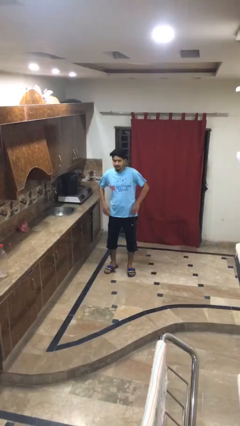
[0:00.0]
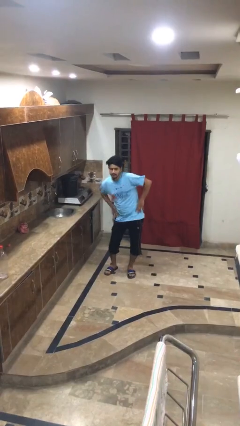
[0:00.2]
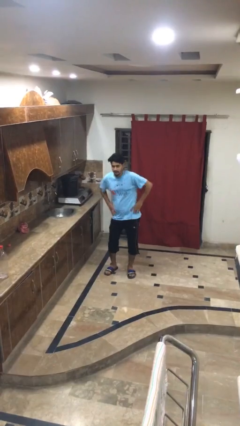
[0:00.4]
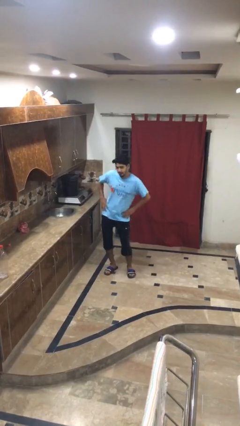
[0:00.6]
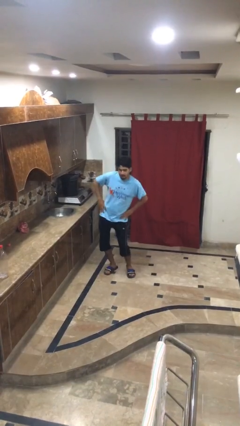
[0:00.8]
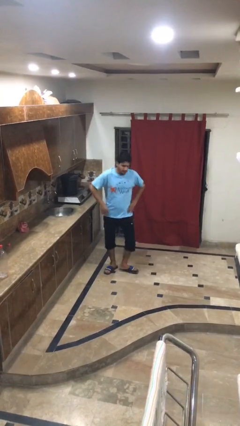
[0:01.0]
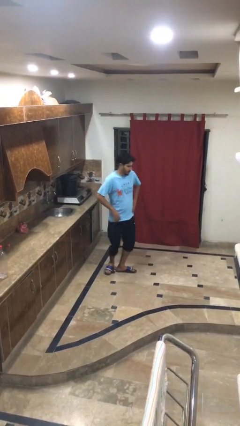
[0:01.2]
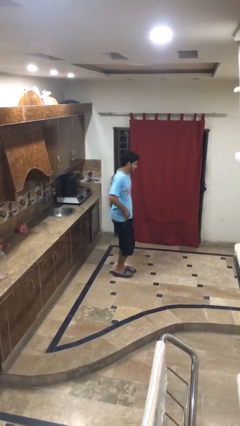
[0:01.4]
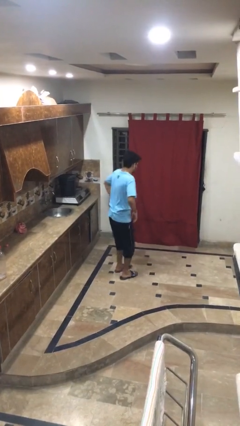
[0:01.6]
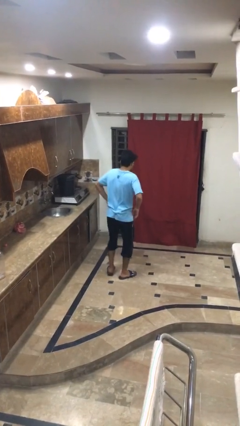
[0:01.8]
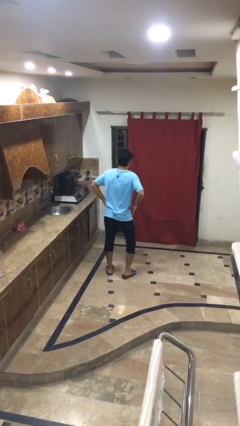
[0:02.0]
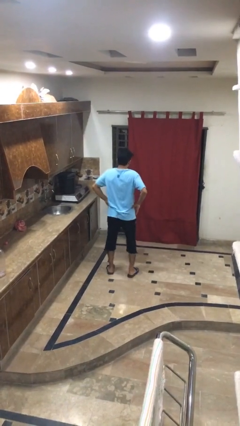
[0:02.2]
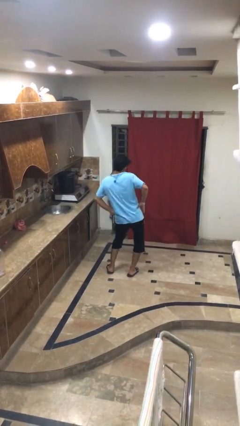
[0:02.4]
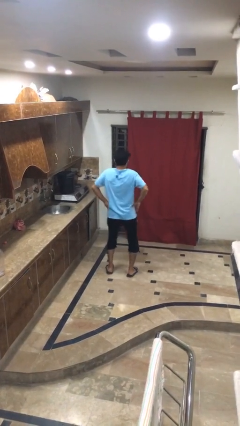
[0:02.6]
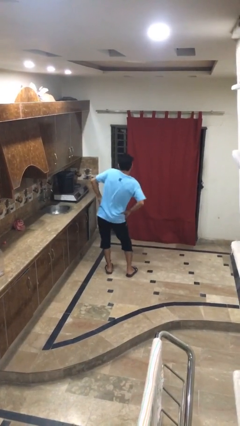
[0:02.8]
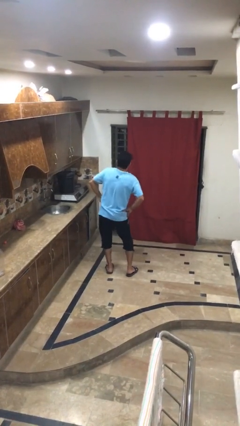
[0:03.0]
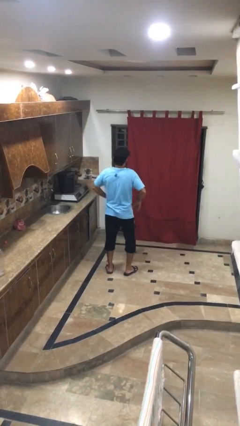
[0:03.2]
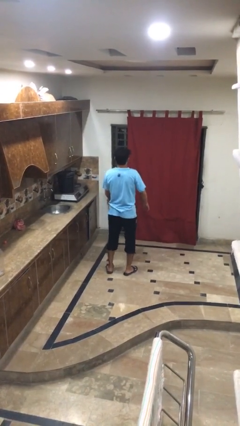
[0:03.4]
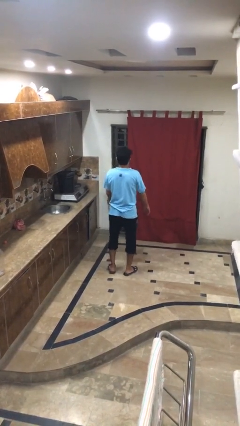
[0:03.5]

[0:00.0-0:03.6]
person wiggles hips

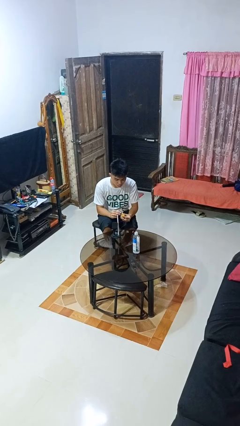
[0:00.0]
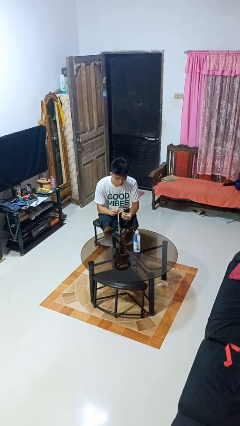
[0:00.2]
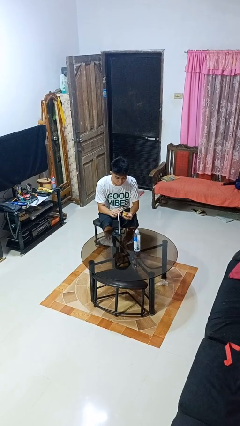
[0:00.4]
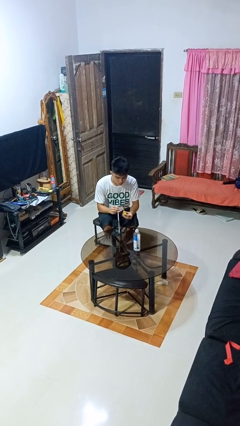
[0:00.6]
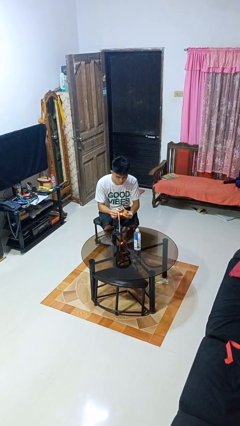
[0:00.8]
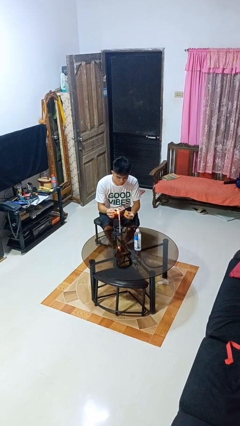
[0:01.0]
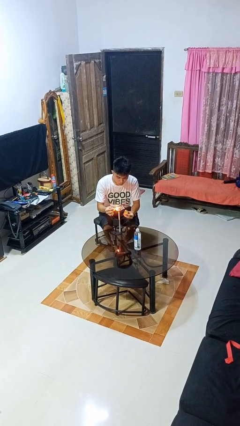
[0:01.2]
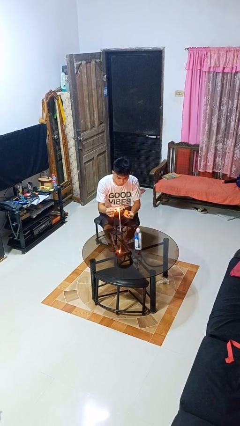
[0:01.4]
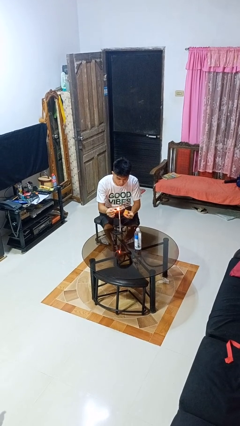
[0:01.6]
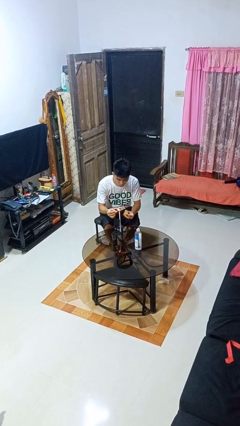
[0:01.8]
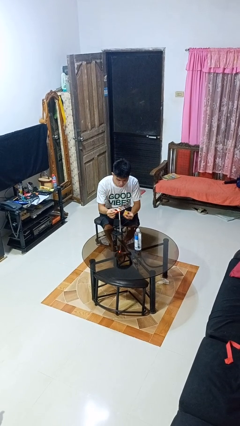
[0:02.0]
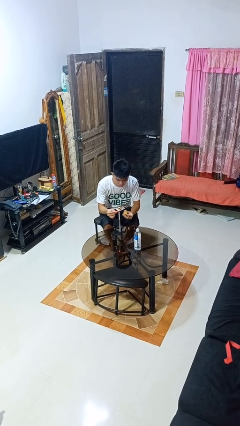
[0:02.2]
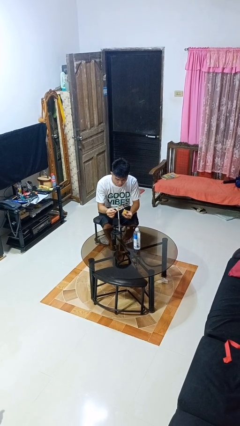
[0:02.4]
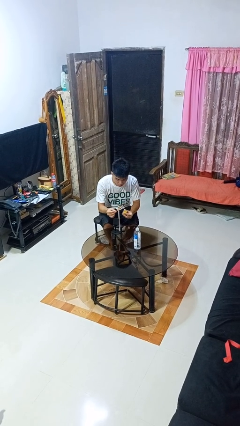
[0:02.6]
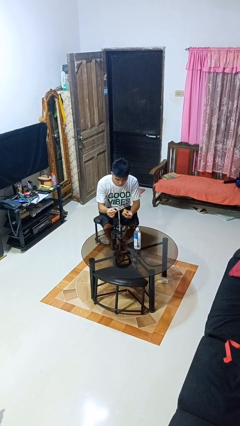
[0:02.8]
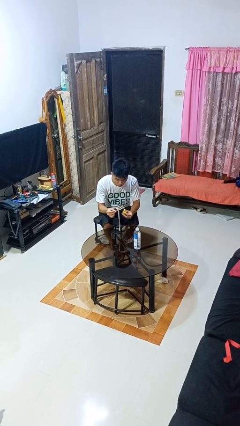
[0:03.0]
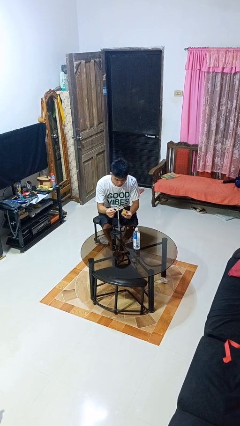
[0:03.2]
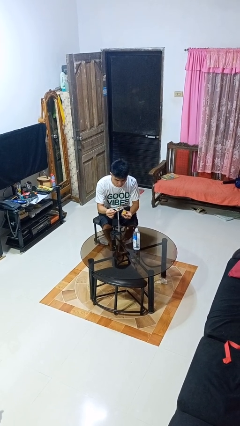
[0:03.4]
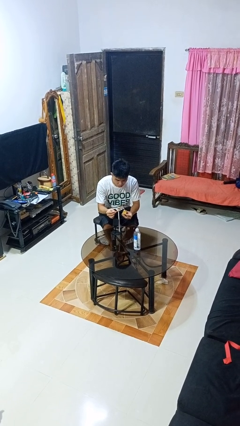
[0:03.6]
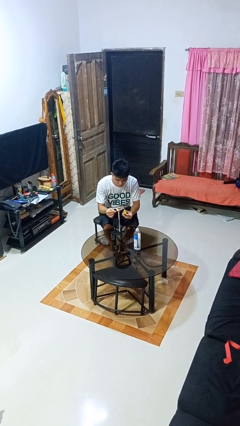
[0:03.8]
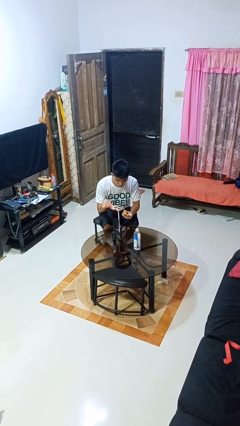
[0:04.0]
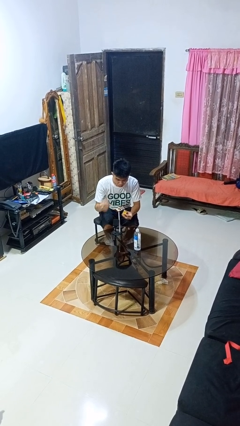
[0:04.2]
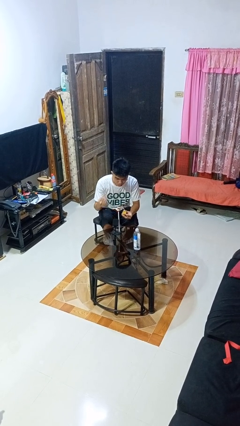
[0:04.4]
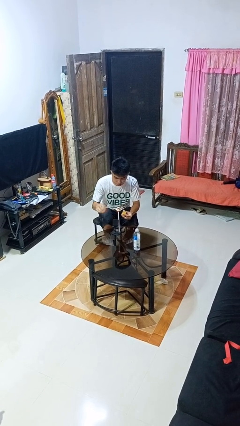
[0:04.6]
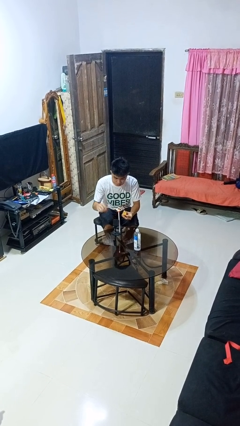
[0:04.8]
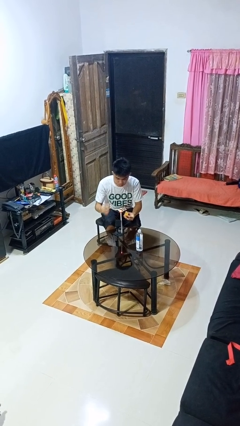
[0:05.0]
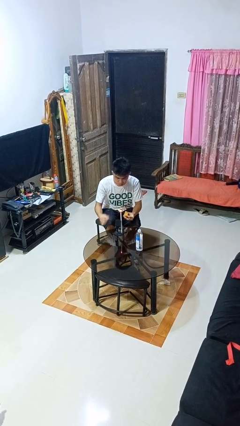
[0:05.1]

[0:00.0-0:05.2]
person lights candle

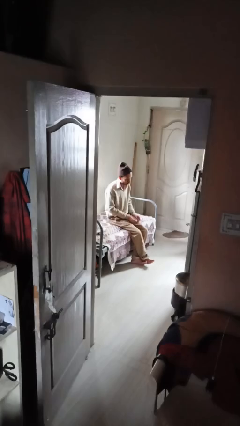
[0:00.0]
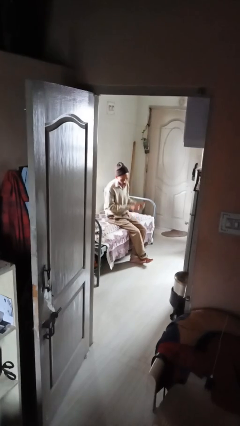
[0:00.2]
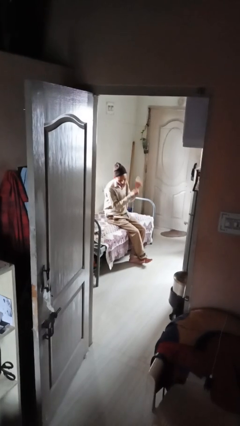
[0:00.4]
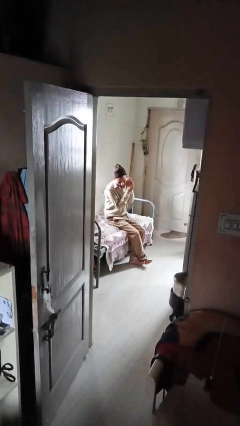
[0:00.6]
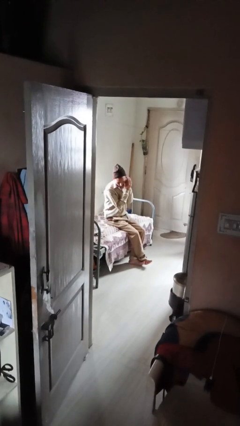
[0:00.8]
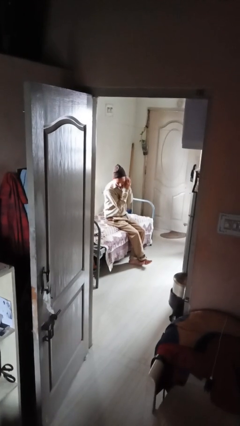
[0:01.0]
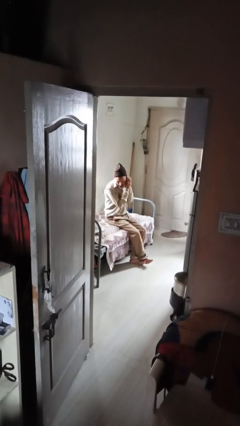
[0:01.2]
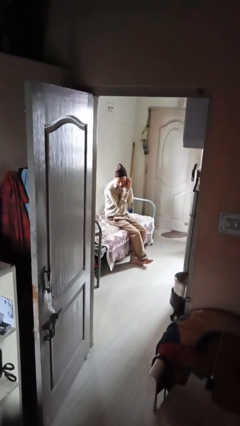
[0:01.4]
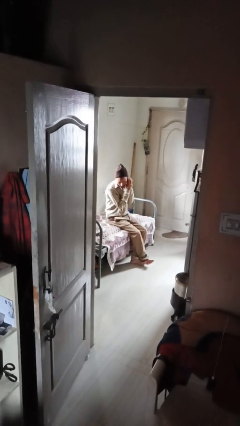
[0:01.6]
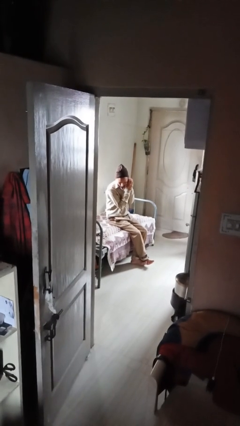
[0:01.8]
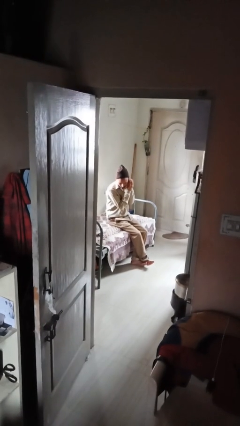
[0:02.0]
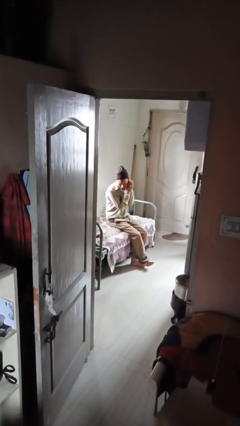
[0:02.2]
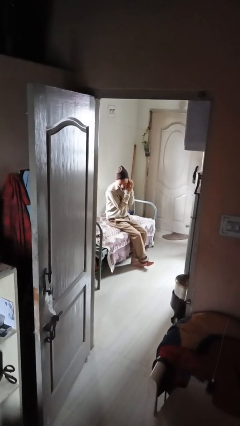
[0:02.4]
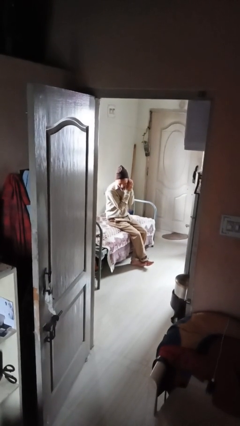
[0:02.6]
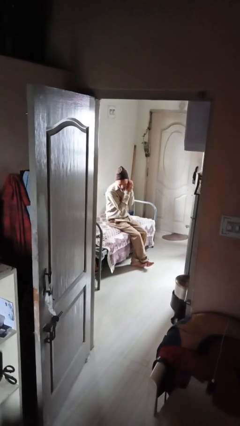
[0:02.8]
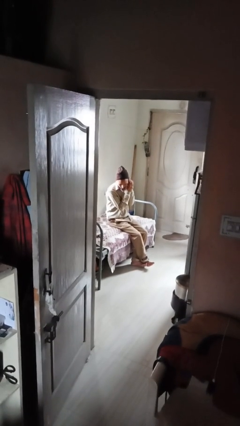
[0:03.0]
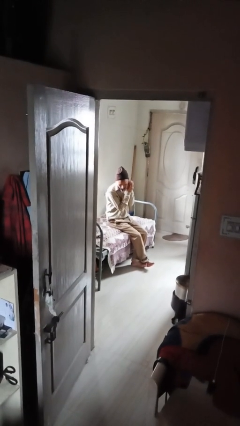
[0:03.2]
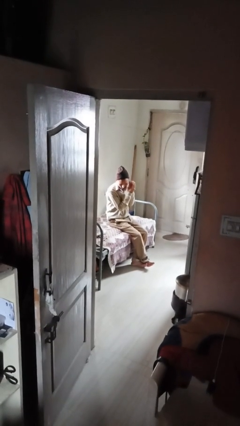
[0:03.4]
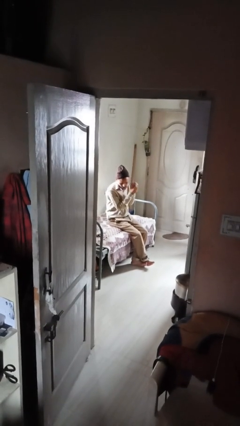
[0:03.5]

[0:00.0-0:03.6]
person puts on earrings

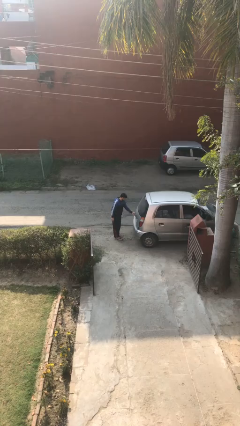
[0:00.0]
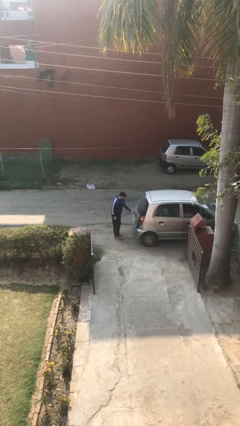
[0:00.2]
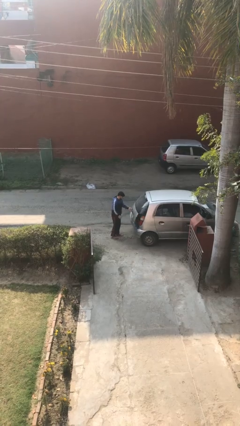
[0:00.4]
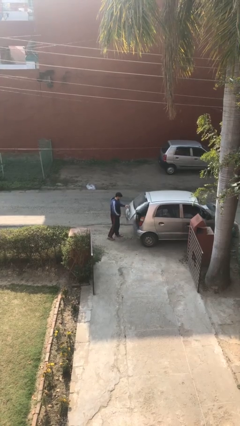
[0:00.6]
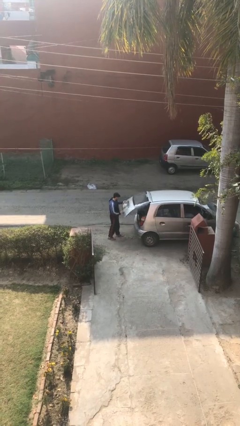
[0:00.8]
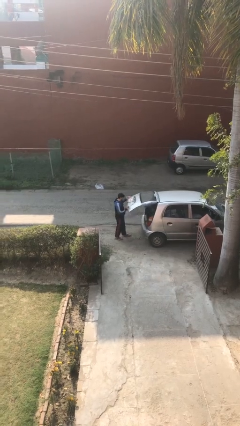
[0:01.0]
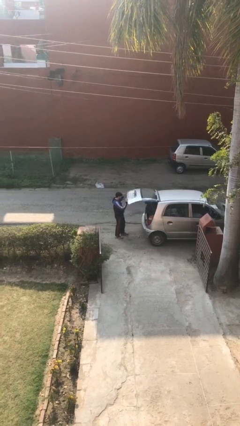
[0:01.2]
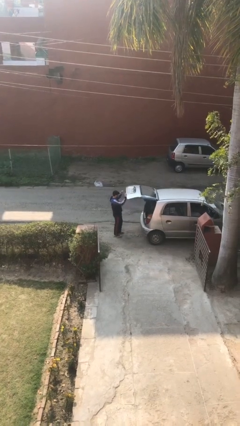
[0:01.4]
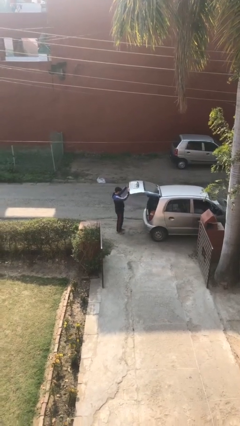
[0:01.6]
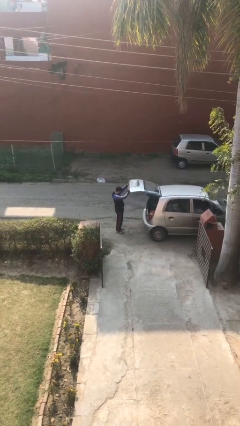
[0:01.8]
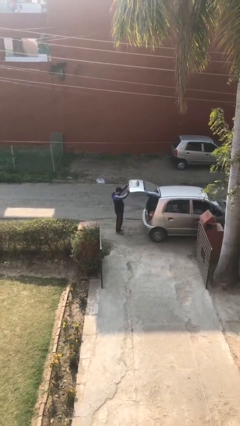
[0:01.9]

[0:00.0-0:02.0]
person opens car trunk

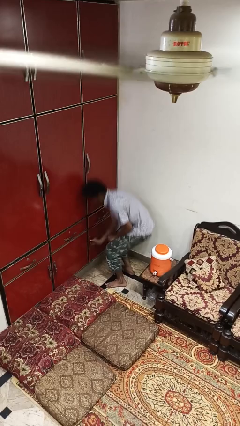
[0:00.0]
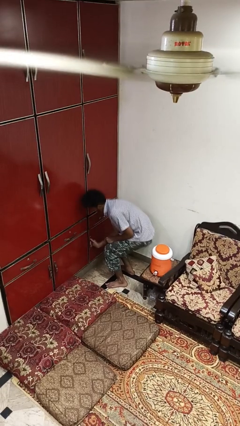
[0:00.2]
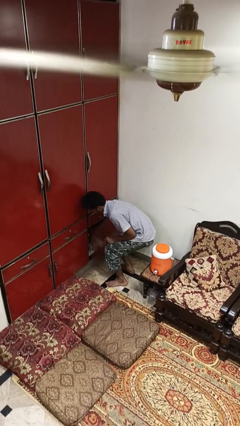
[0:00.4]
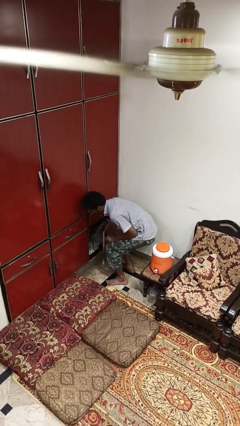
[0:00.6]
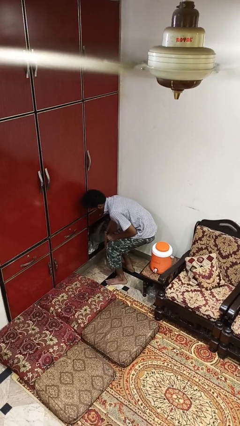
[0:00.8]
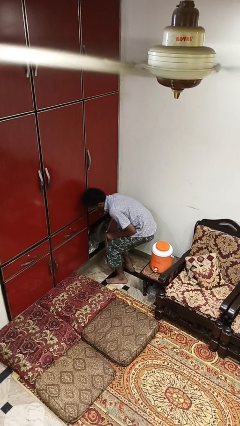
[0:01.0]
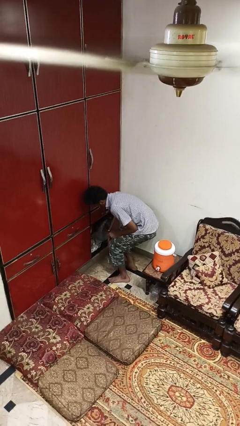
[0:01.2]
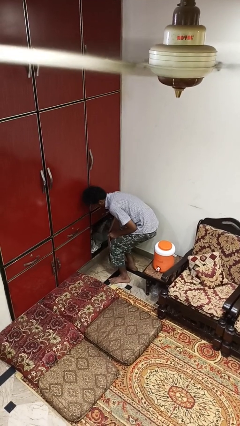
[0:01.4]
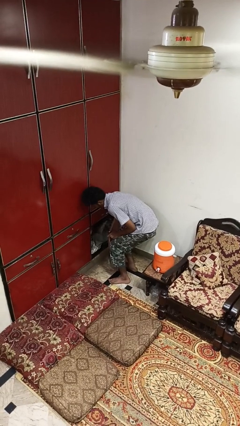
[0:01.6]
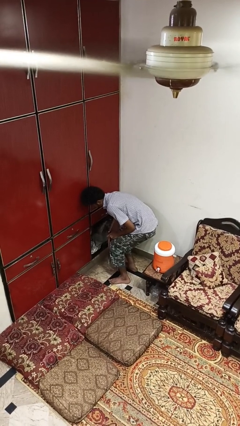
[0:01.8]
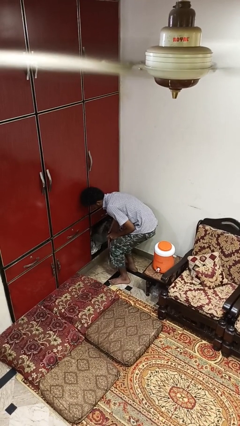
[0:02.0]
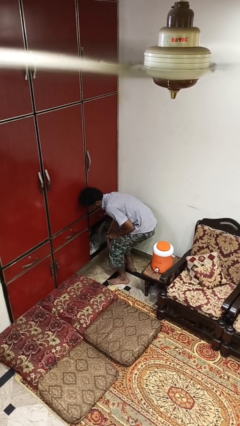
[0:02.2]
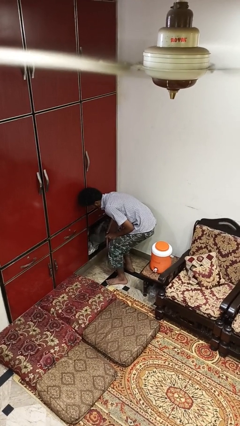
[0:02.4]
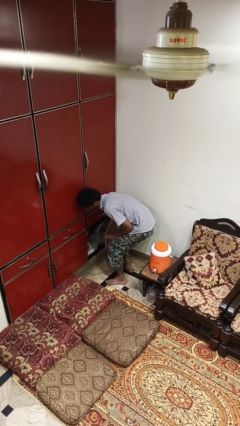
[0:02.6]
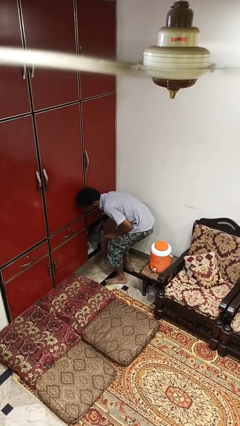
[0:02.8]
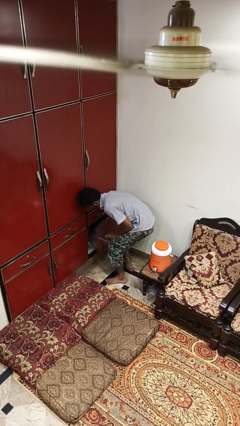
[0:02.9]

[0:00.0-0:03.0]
person closes cabinet

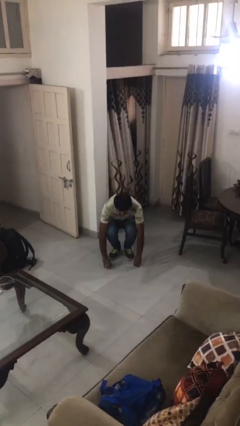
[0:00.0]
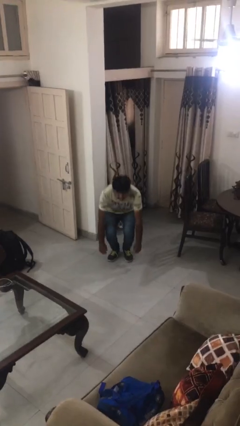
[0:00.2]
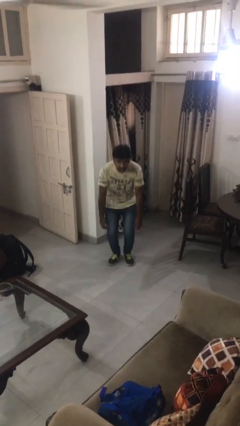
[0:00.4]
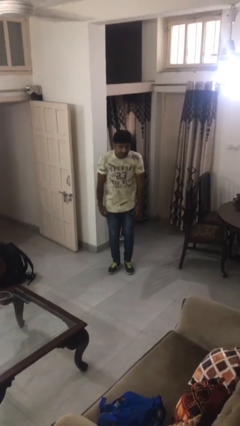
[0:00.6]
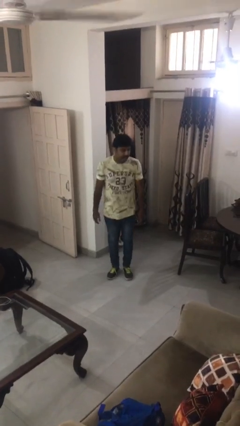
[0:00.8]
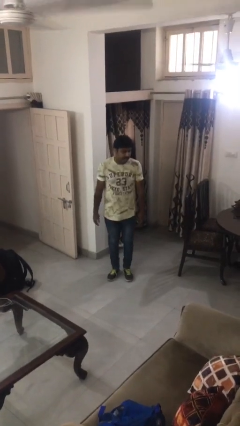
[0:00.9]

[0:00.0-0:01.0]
person stands up
